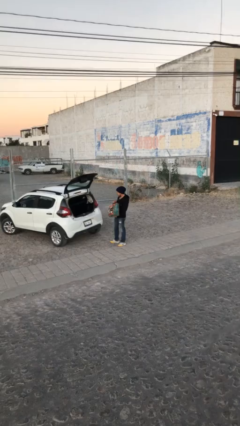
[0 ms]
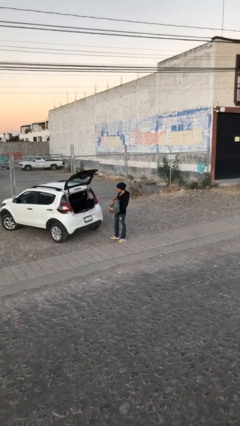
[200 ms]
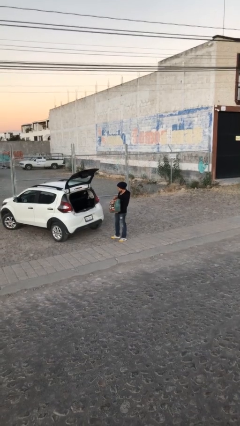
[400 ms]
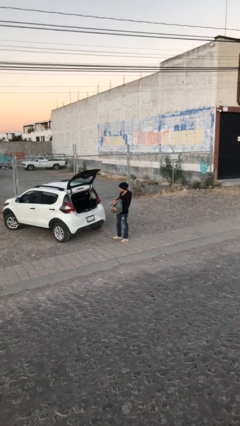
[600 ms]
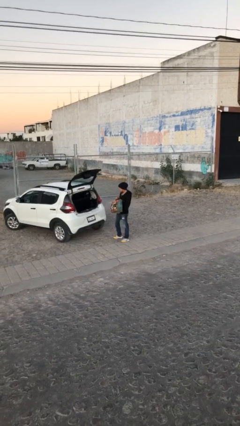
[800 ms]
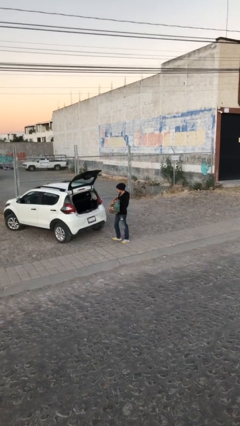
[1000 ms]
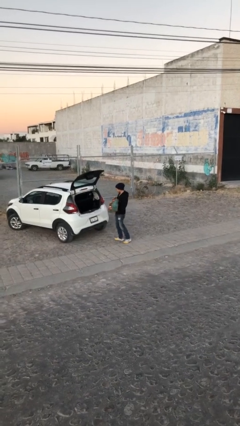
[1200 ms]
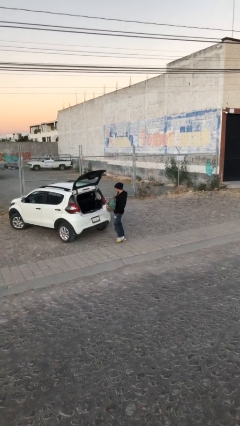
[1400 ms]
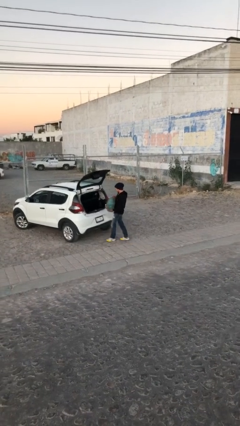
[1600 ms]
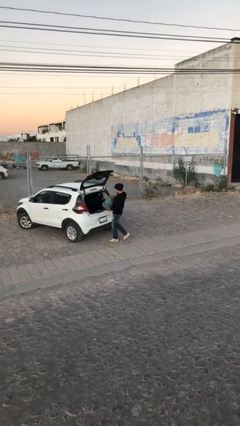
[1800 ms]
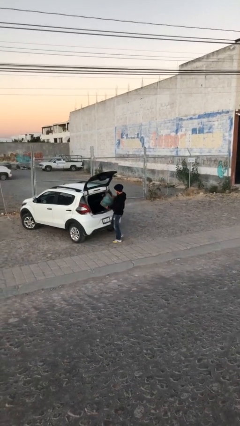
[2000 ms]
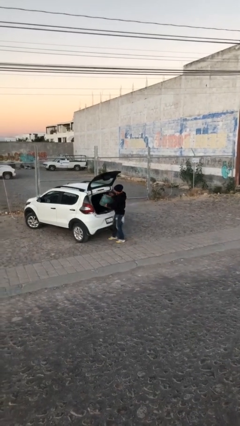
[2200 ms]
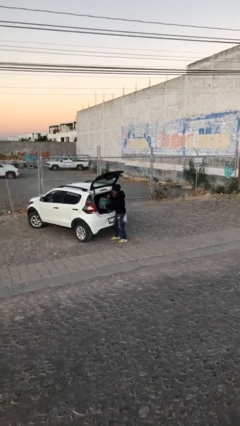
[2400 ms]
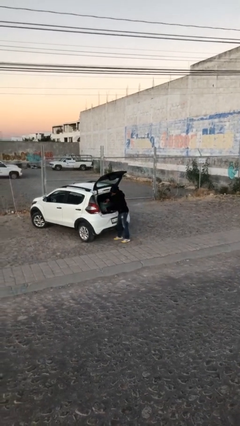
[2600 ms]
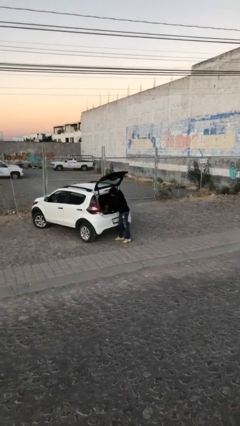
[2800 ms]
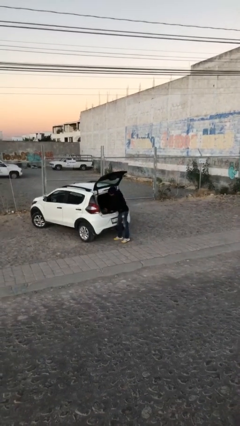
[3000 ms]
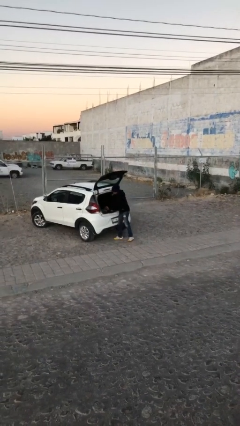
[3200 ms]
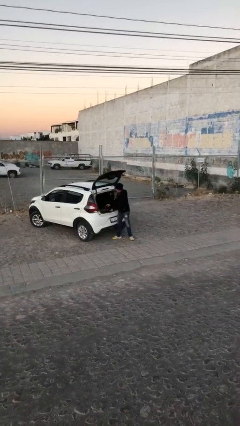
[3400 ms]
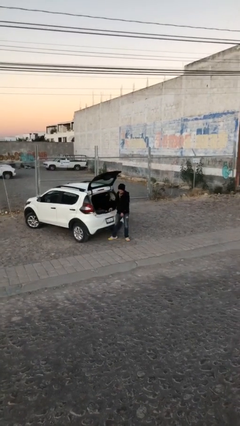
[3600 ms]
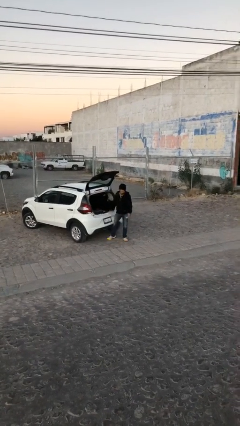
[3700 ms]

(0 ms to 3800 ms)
person loads car

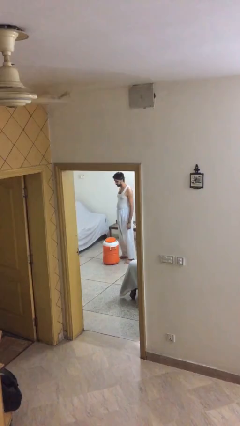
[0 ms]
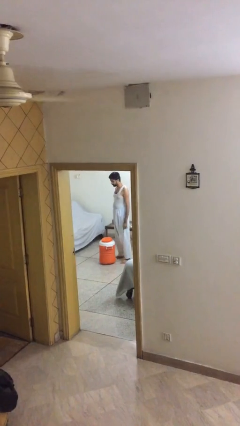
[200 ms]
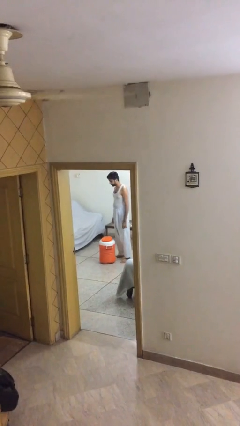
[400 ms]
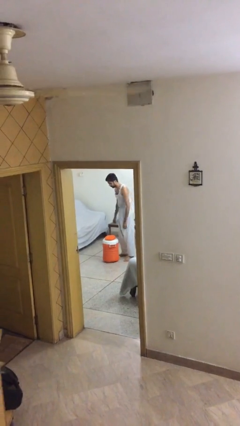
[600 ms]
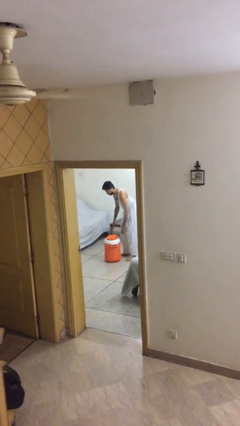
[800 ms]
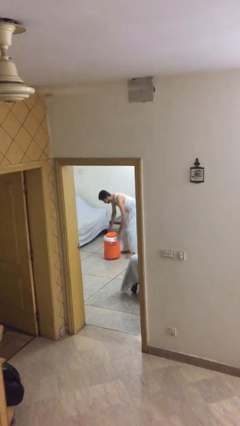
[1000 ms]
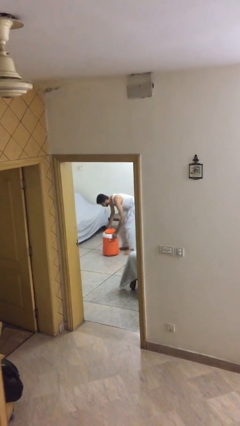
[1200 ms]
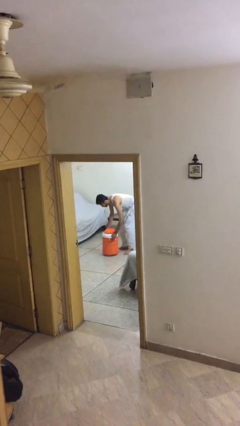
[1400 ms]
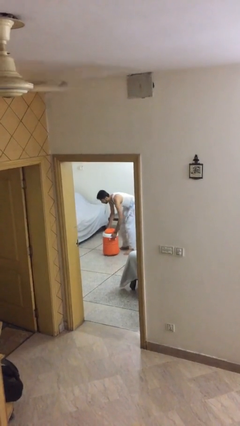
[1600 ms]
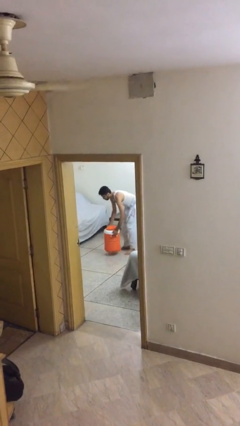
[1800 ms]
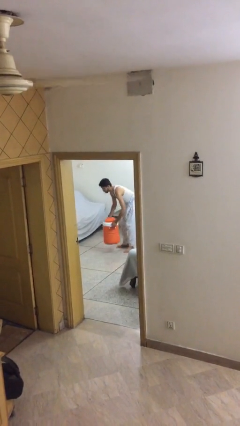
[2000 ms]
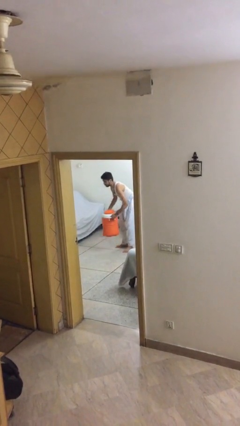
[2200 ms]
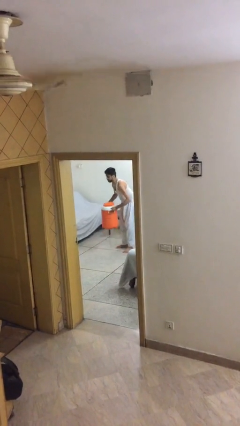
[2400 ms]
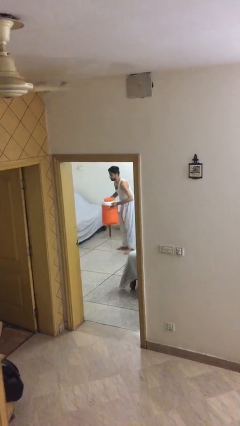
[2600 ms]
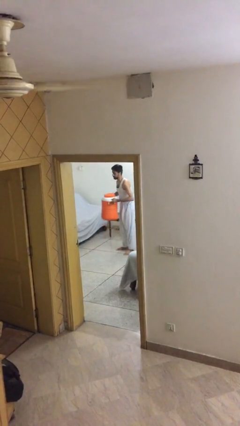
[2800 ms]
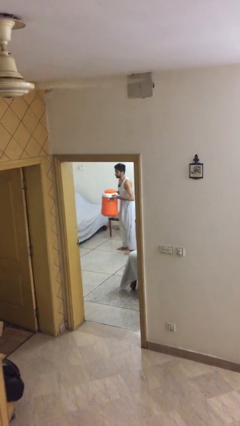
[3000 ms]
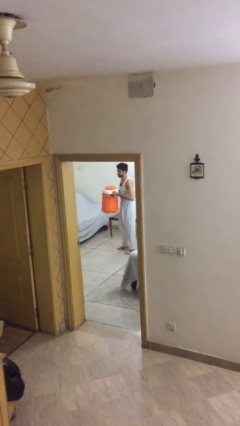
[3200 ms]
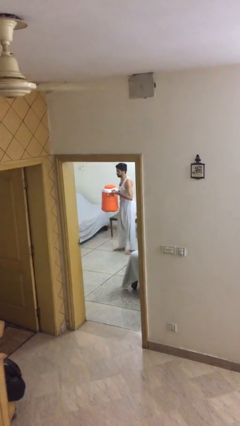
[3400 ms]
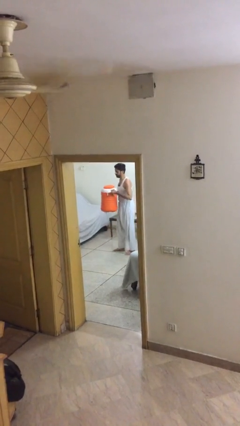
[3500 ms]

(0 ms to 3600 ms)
person picks up object from floor

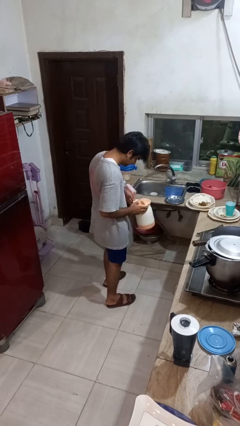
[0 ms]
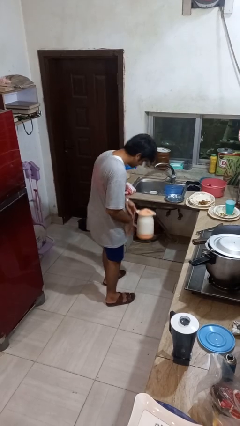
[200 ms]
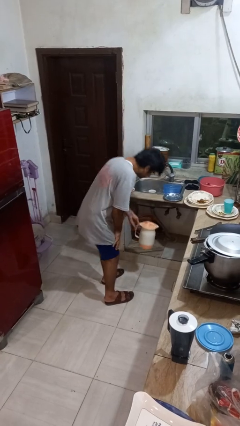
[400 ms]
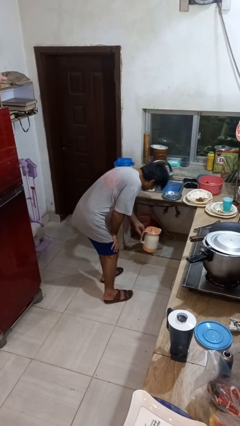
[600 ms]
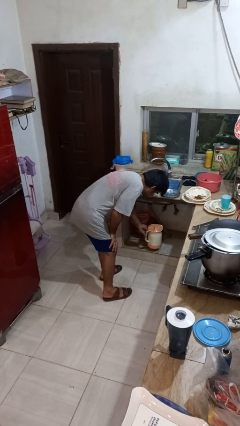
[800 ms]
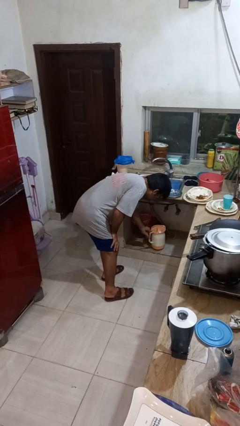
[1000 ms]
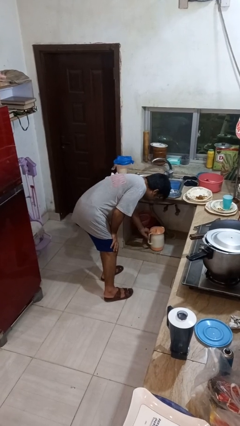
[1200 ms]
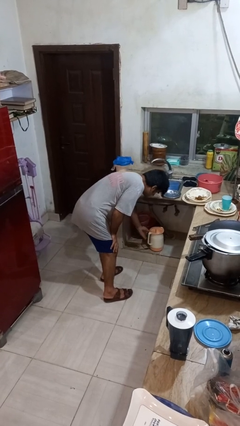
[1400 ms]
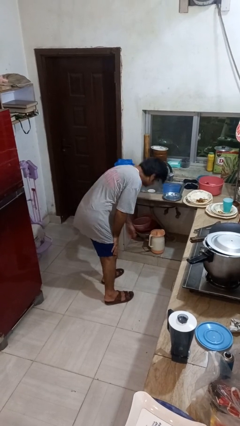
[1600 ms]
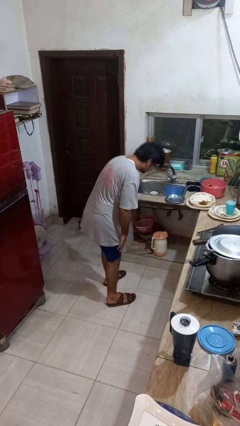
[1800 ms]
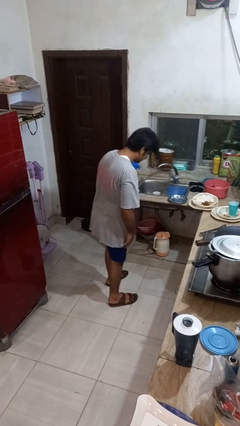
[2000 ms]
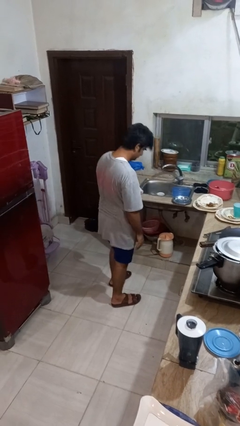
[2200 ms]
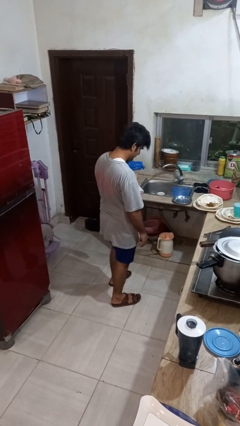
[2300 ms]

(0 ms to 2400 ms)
person puts down object into cabinet

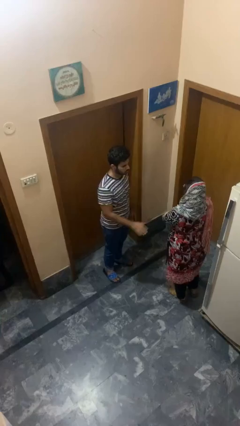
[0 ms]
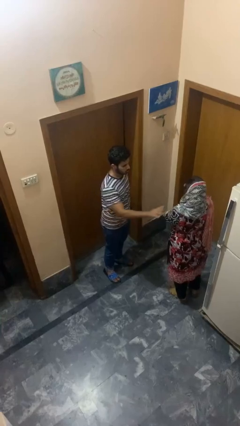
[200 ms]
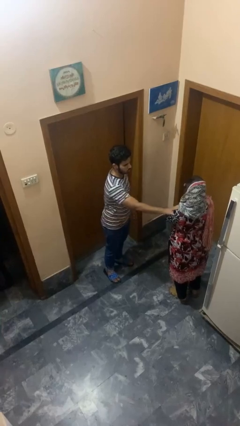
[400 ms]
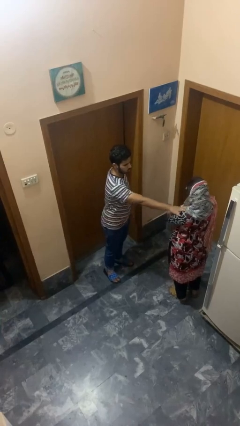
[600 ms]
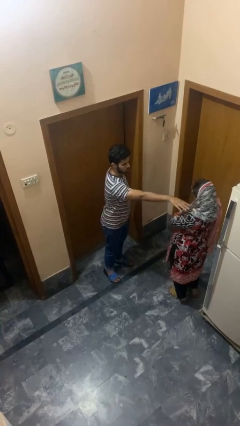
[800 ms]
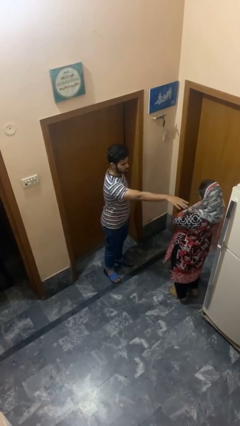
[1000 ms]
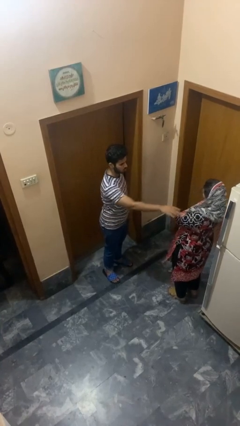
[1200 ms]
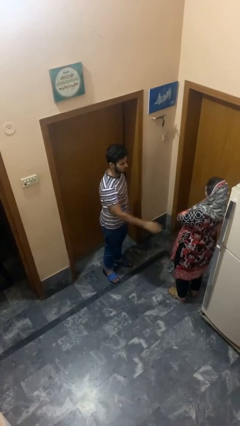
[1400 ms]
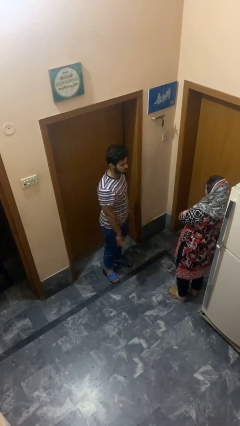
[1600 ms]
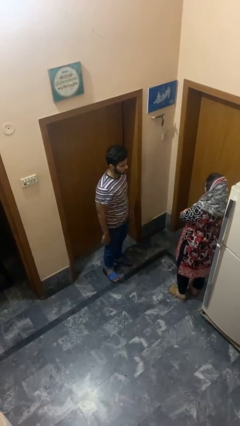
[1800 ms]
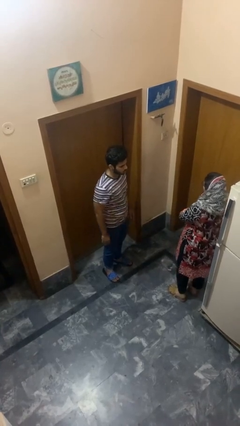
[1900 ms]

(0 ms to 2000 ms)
person shoves person

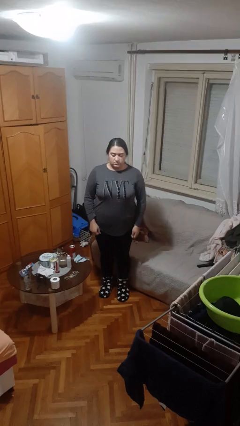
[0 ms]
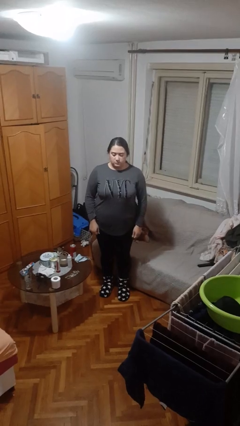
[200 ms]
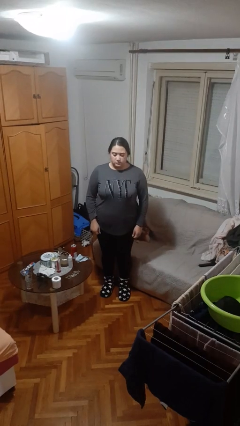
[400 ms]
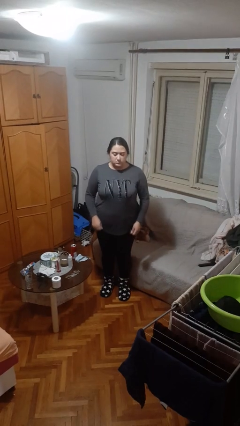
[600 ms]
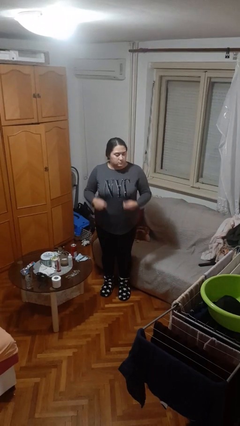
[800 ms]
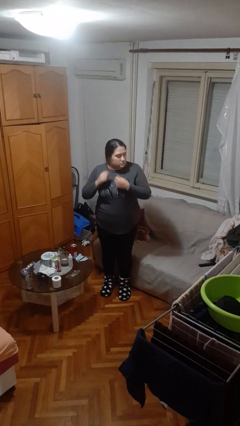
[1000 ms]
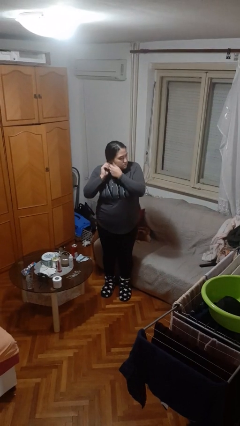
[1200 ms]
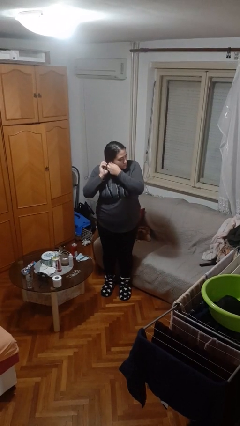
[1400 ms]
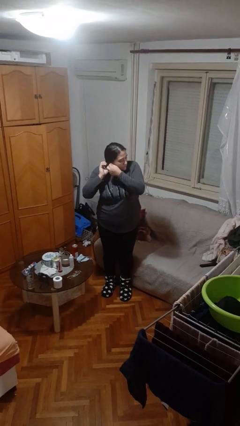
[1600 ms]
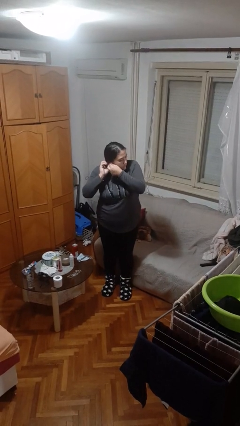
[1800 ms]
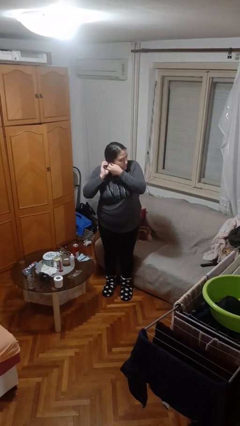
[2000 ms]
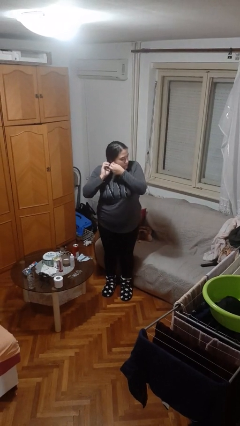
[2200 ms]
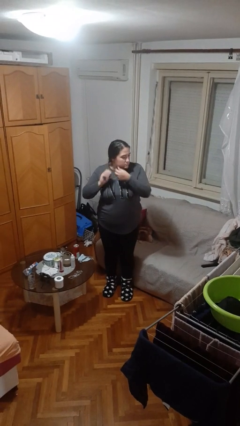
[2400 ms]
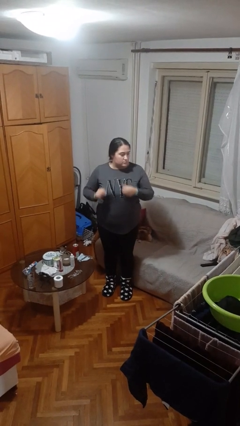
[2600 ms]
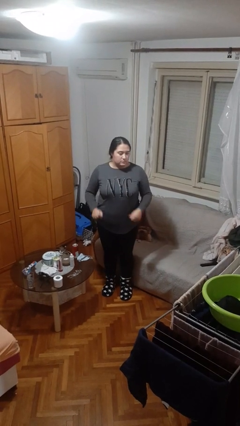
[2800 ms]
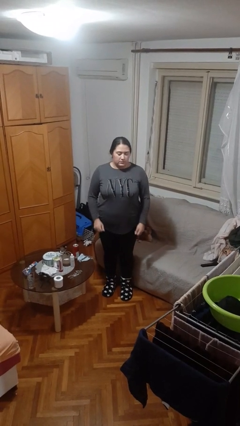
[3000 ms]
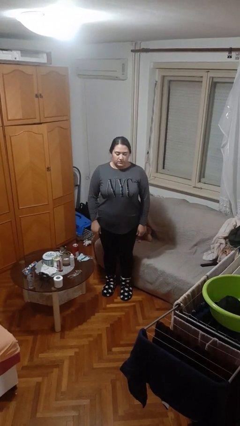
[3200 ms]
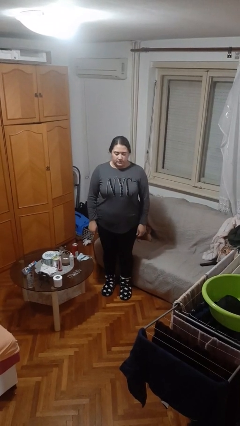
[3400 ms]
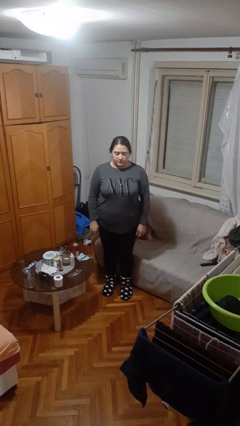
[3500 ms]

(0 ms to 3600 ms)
person takes off earrings

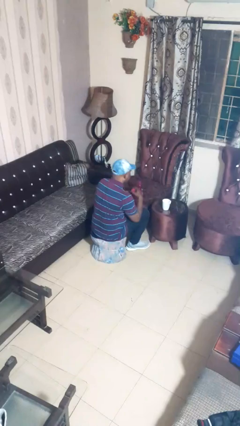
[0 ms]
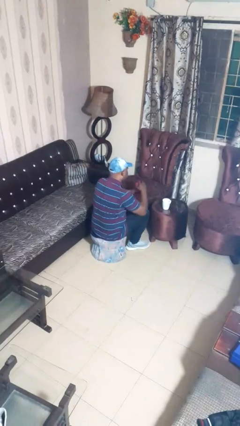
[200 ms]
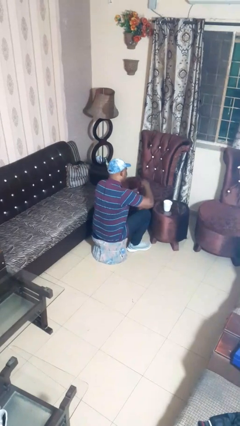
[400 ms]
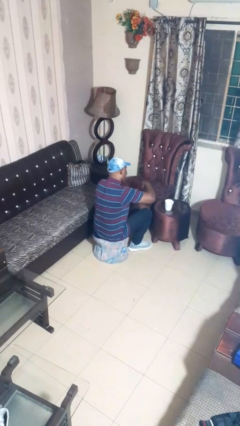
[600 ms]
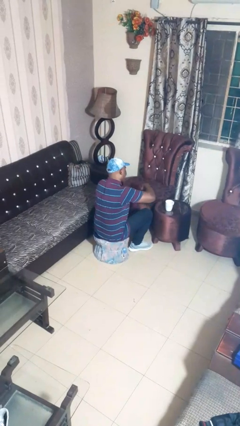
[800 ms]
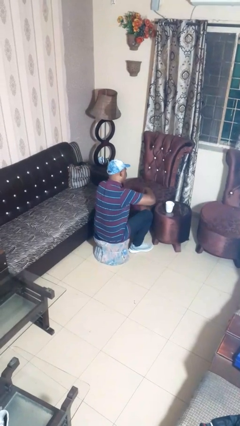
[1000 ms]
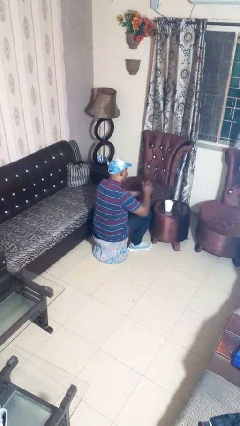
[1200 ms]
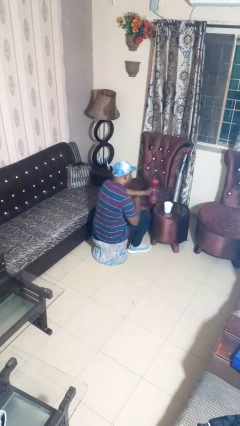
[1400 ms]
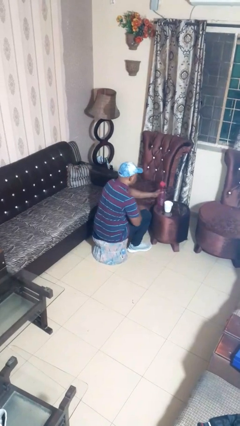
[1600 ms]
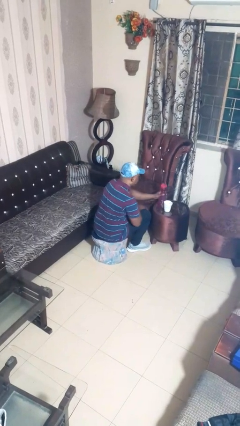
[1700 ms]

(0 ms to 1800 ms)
person screws lid to bottle

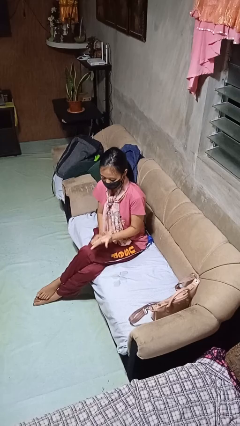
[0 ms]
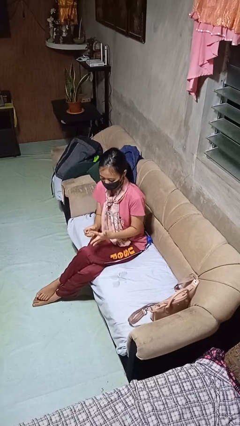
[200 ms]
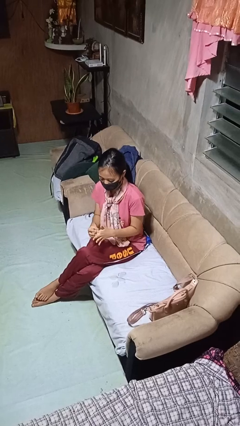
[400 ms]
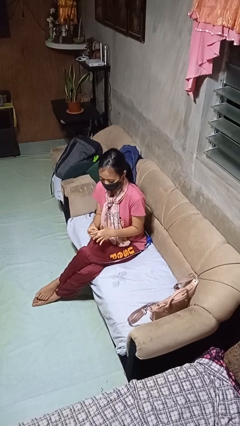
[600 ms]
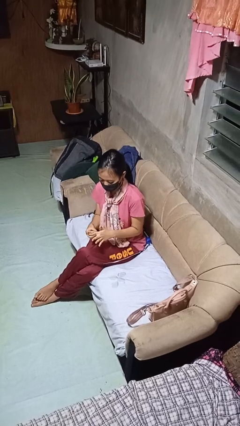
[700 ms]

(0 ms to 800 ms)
person takes off ring
